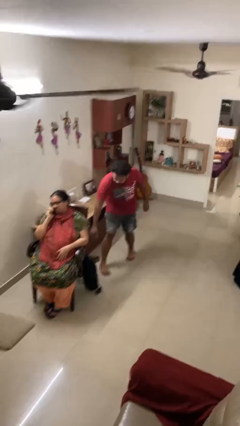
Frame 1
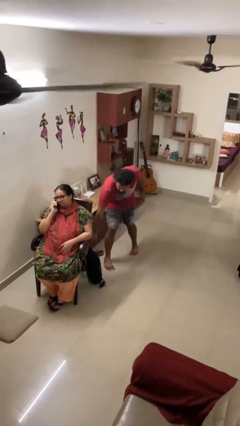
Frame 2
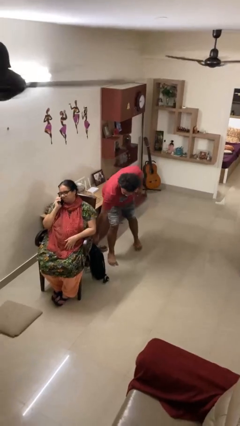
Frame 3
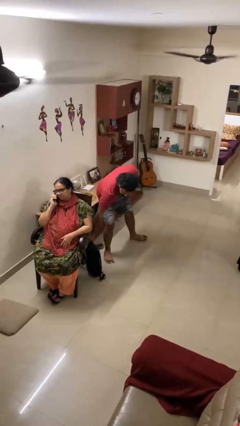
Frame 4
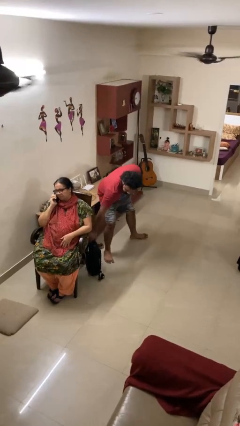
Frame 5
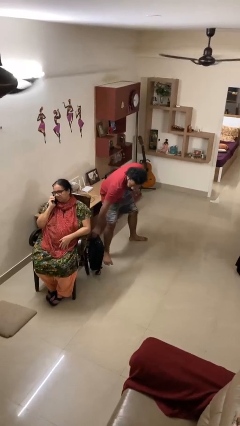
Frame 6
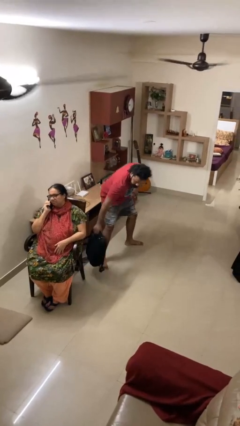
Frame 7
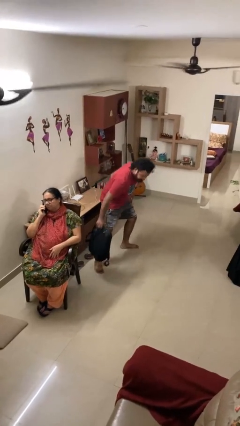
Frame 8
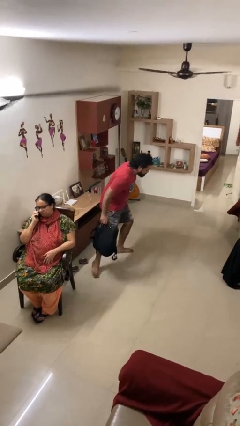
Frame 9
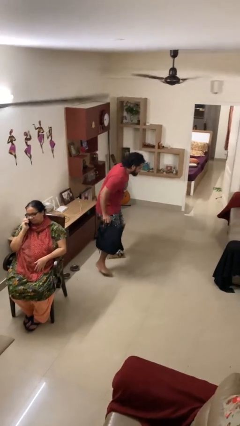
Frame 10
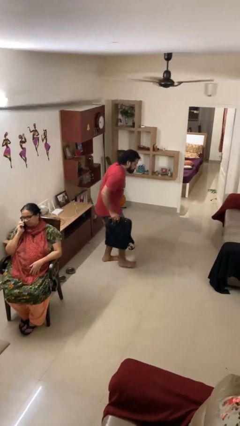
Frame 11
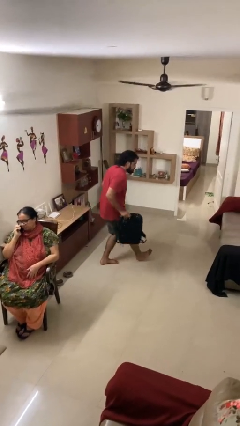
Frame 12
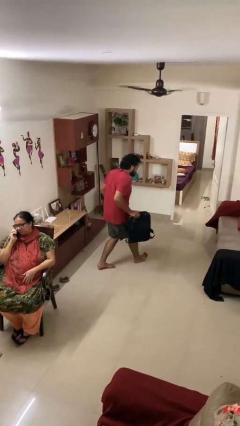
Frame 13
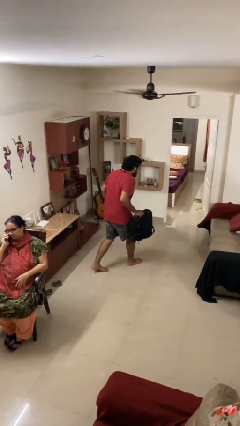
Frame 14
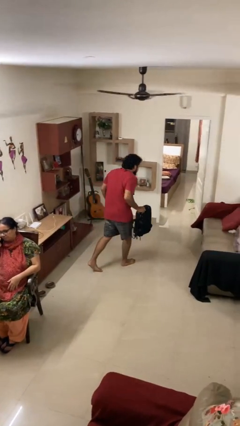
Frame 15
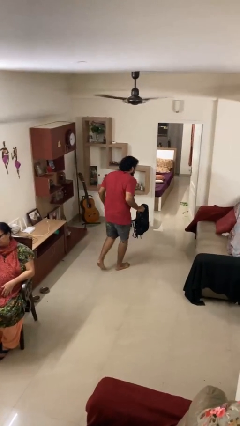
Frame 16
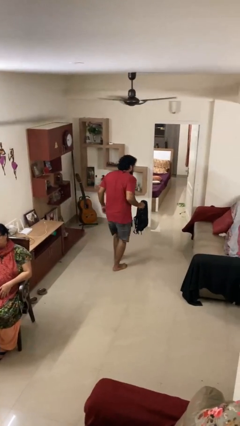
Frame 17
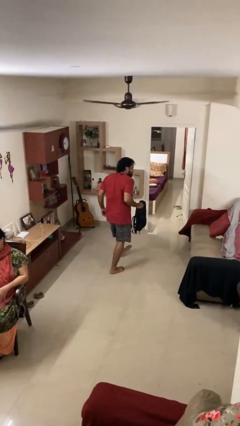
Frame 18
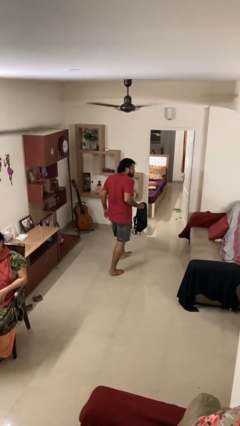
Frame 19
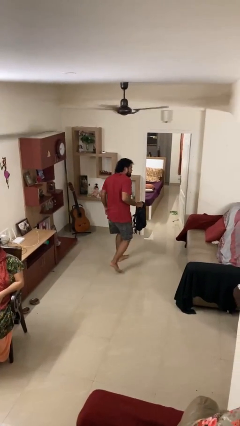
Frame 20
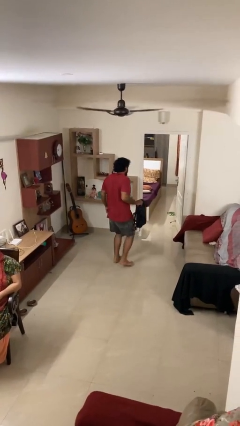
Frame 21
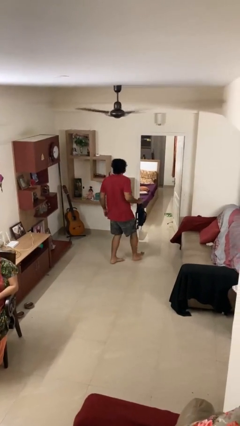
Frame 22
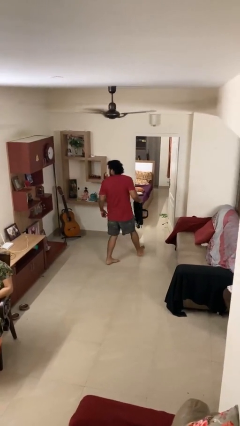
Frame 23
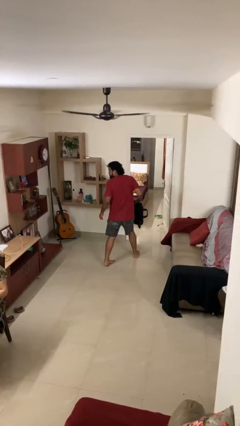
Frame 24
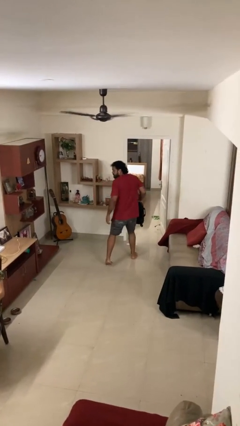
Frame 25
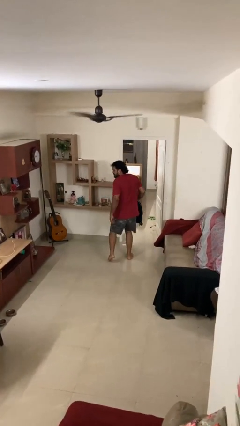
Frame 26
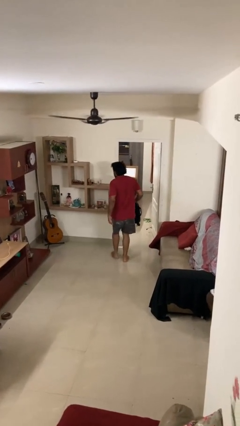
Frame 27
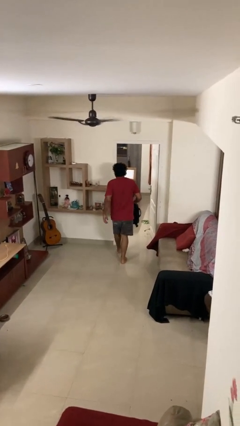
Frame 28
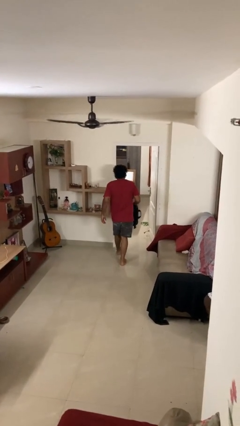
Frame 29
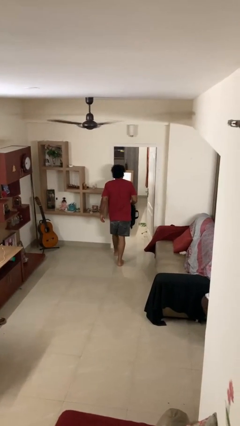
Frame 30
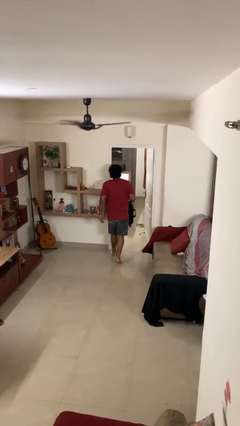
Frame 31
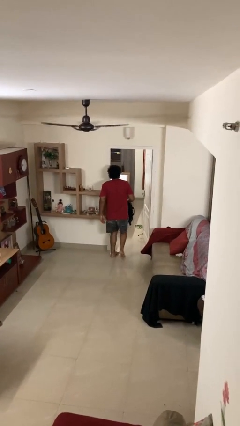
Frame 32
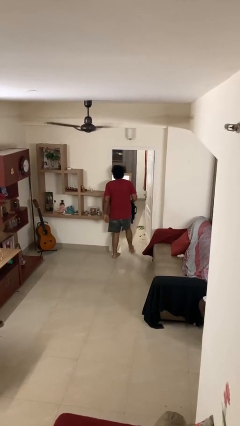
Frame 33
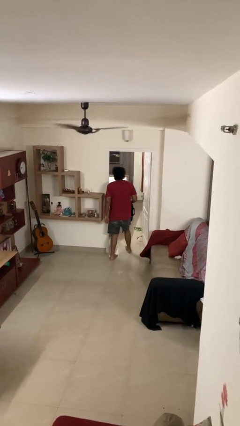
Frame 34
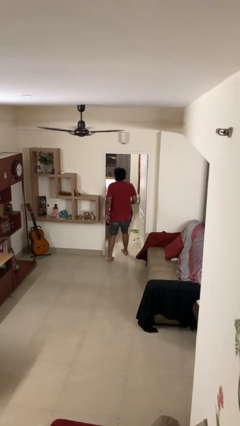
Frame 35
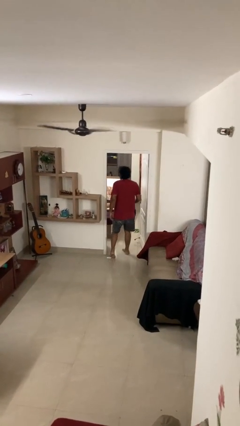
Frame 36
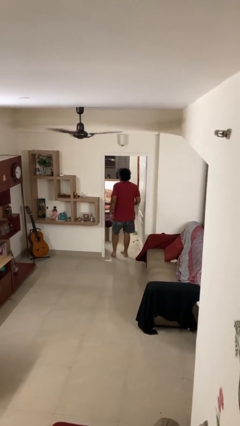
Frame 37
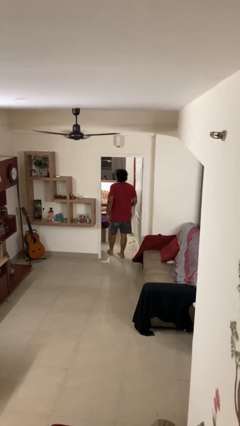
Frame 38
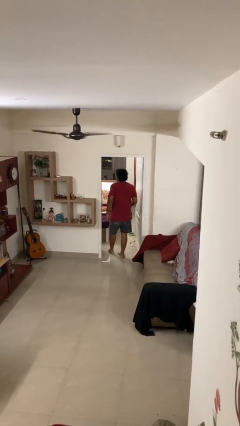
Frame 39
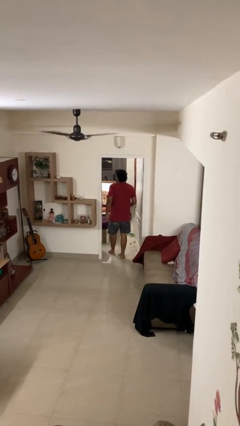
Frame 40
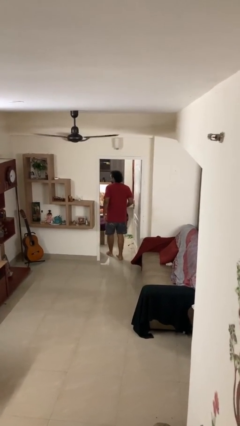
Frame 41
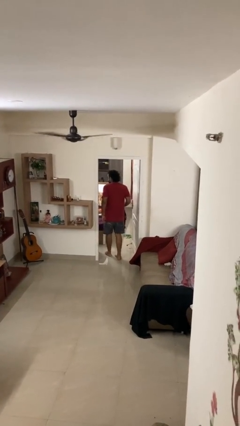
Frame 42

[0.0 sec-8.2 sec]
person steals object from person

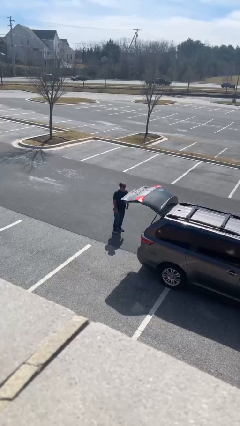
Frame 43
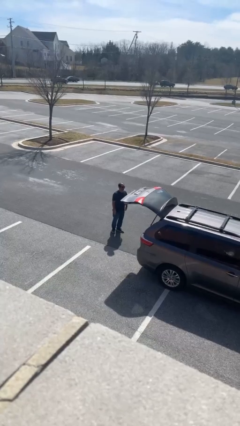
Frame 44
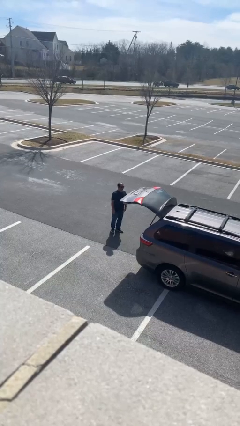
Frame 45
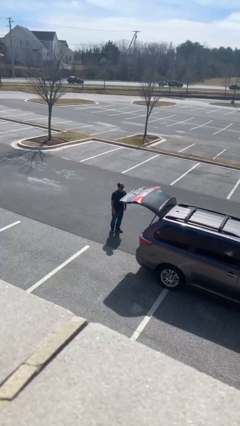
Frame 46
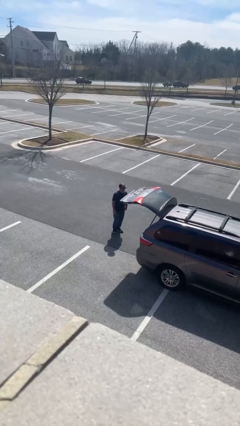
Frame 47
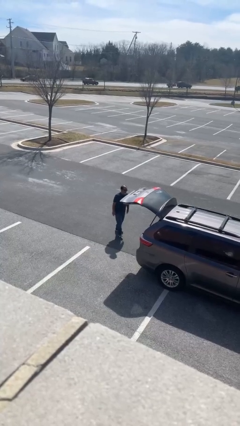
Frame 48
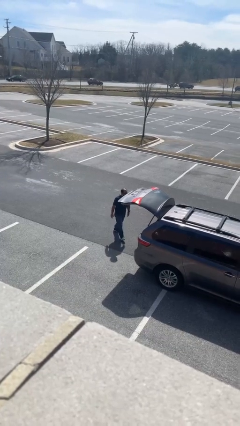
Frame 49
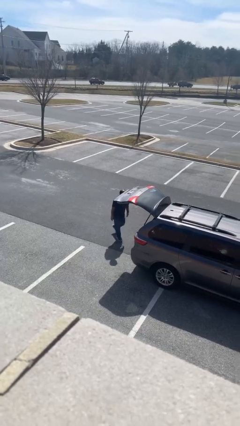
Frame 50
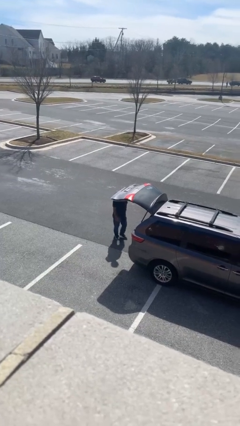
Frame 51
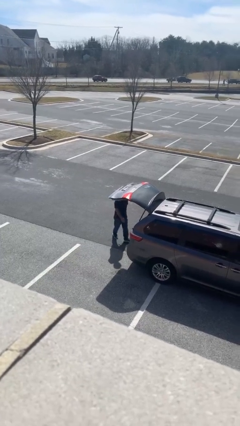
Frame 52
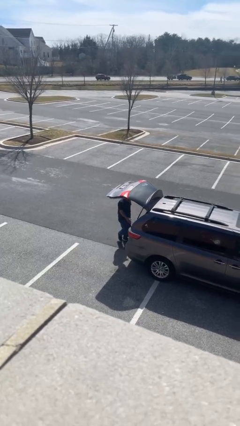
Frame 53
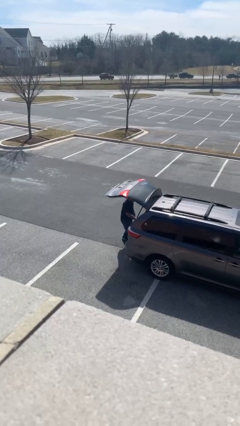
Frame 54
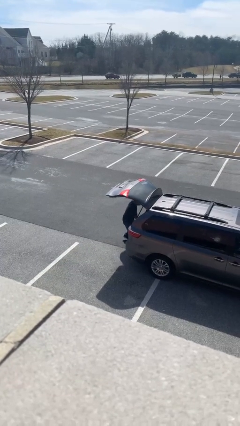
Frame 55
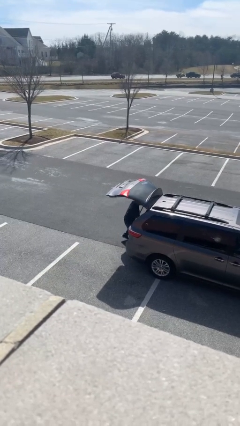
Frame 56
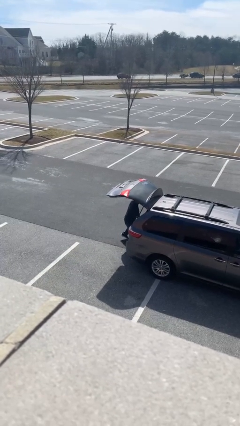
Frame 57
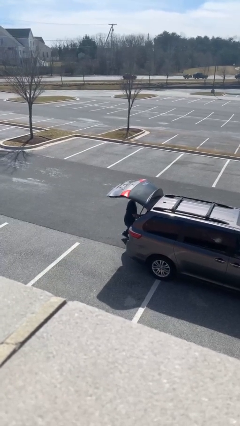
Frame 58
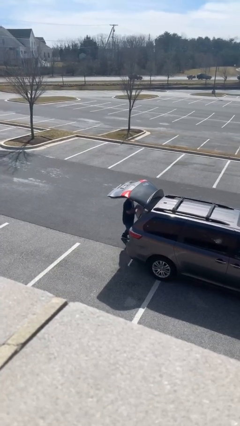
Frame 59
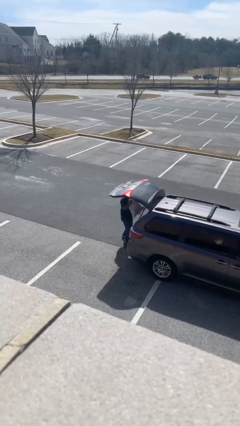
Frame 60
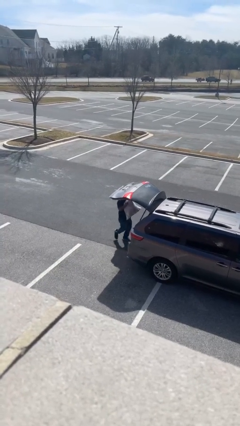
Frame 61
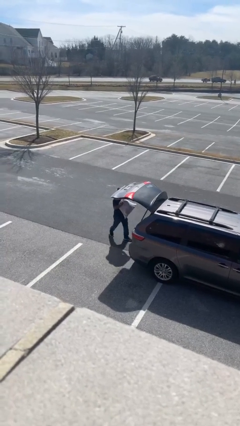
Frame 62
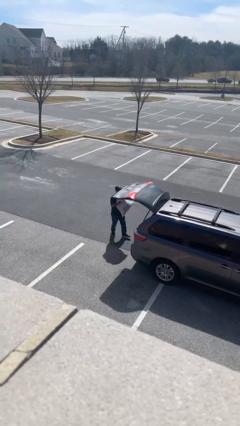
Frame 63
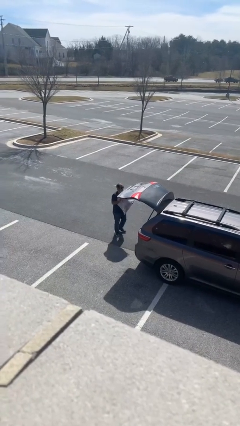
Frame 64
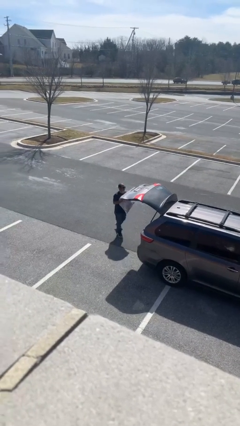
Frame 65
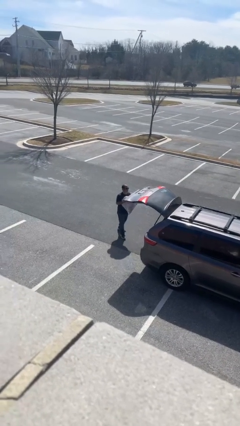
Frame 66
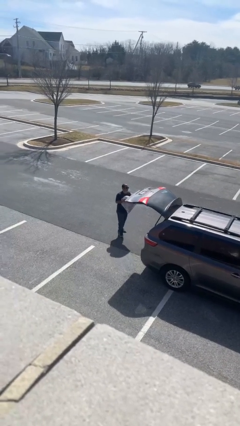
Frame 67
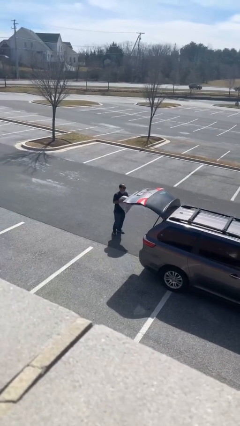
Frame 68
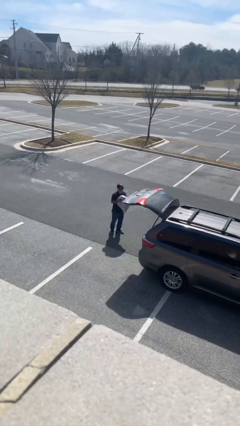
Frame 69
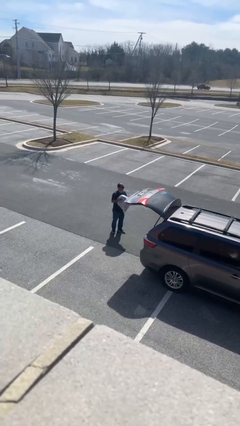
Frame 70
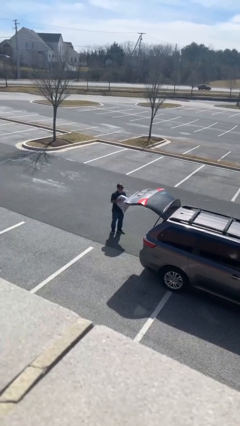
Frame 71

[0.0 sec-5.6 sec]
person unloads car

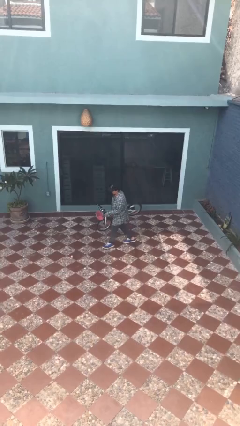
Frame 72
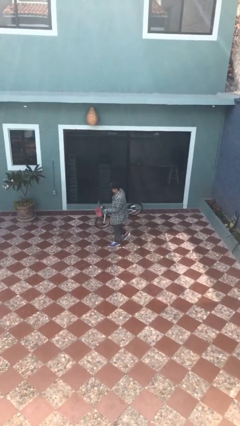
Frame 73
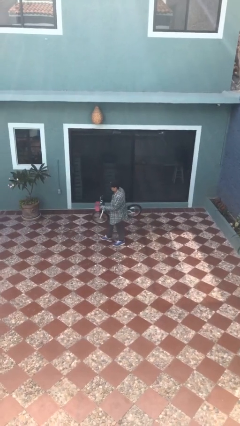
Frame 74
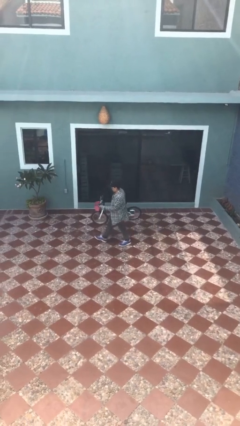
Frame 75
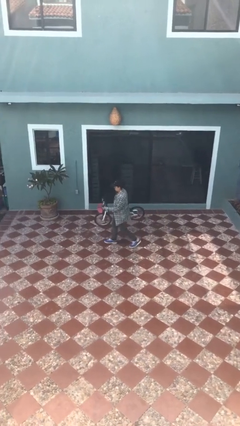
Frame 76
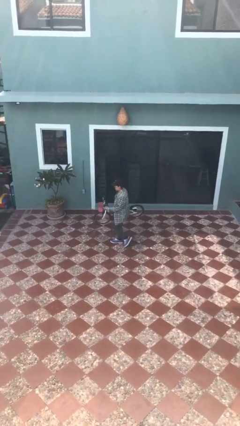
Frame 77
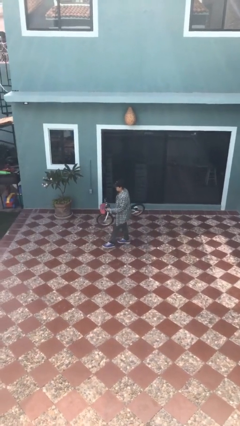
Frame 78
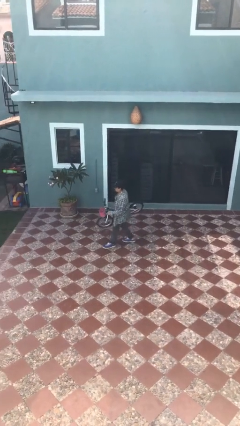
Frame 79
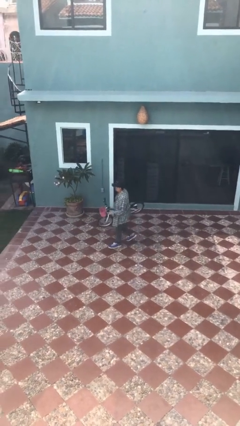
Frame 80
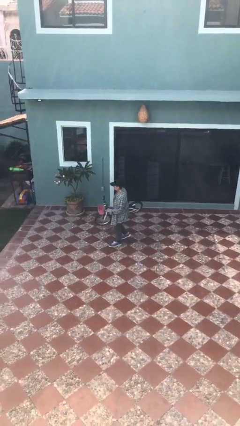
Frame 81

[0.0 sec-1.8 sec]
person carries bicycle

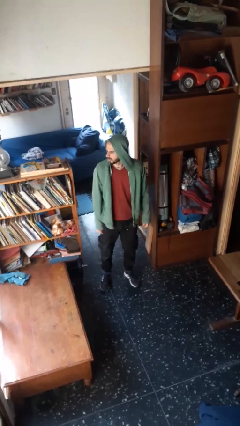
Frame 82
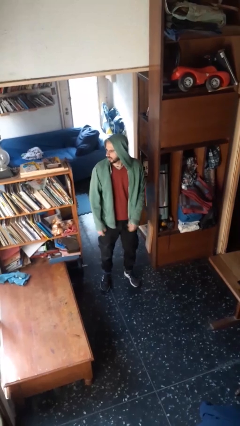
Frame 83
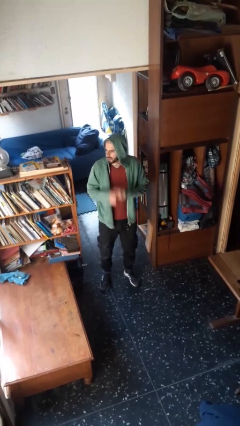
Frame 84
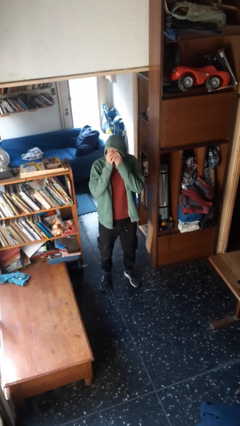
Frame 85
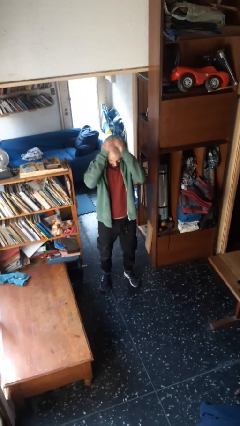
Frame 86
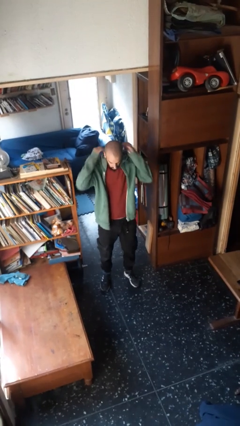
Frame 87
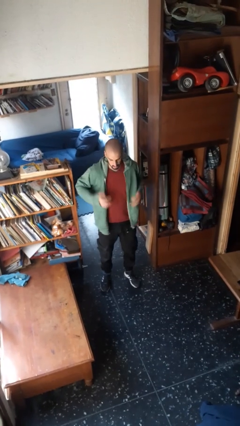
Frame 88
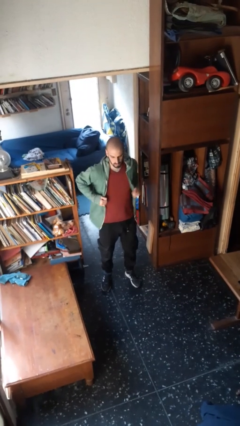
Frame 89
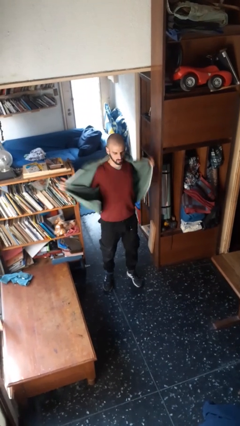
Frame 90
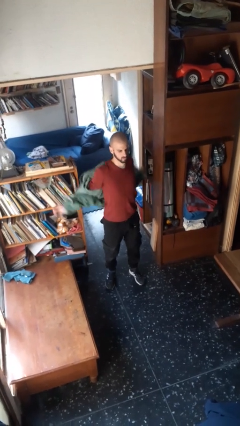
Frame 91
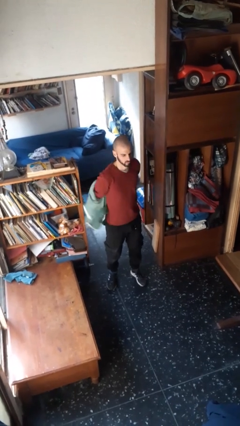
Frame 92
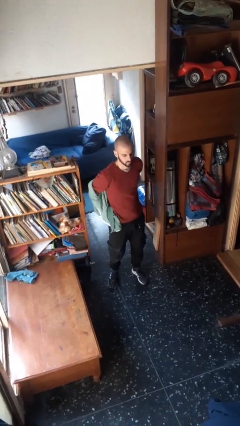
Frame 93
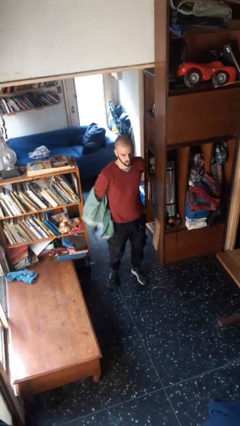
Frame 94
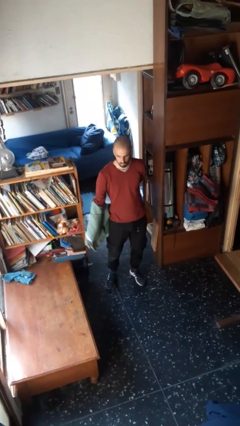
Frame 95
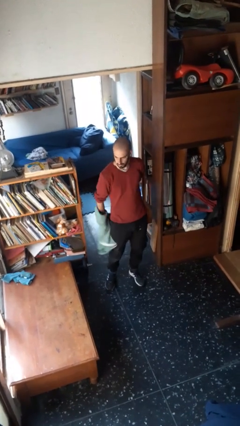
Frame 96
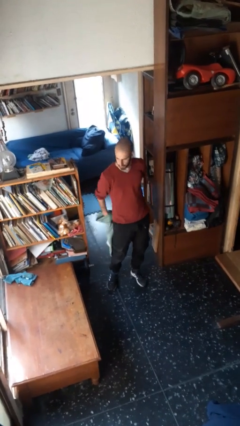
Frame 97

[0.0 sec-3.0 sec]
person takes off hoodie
